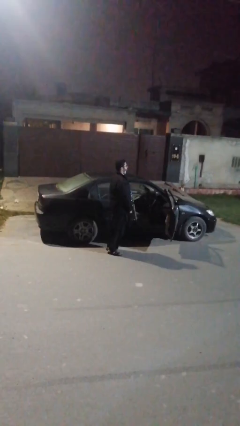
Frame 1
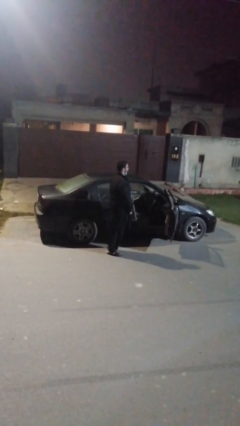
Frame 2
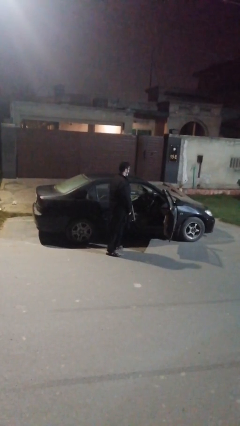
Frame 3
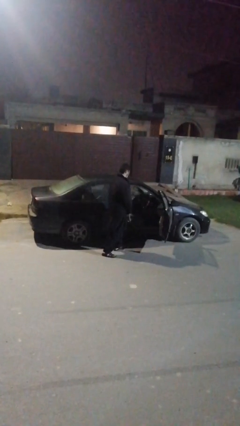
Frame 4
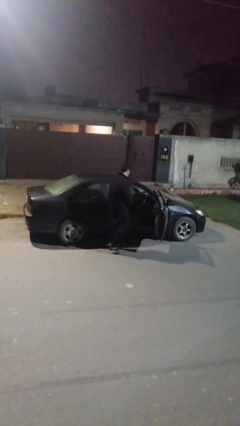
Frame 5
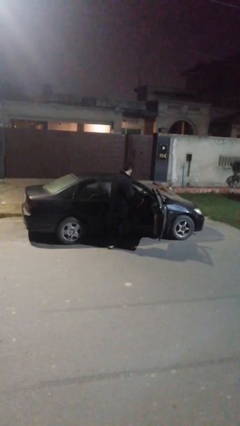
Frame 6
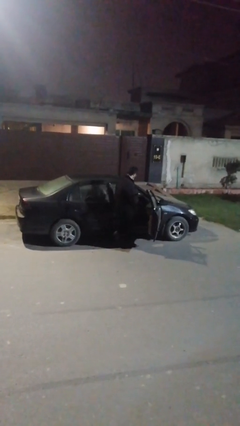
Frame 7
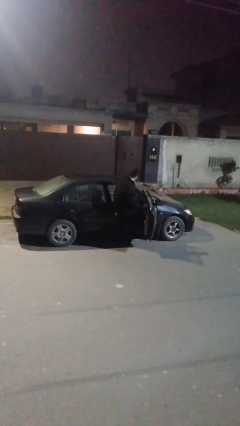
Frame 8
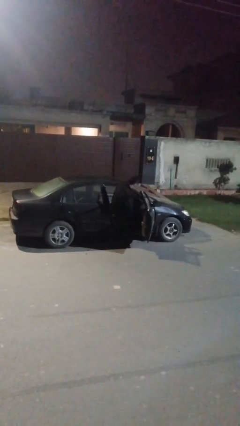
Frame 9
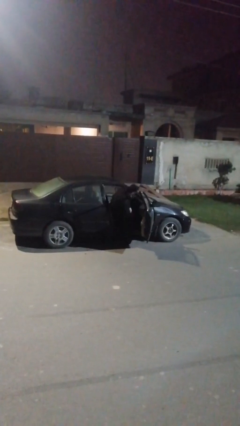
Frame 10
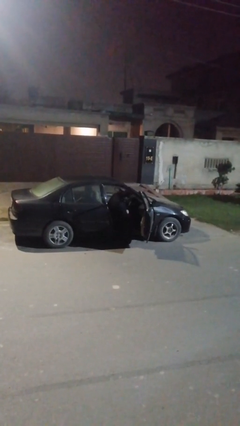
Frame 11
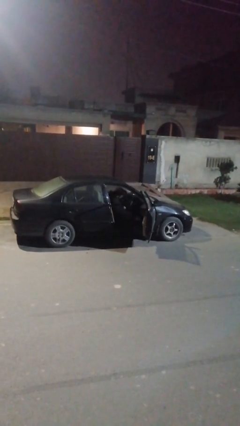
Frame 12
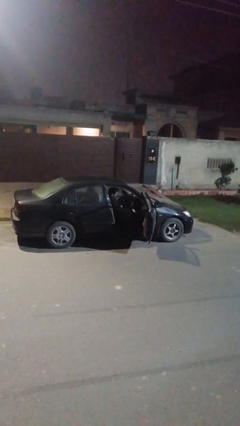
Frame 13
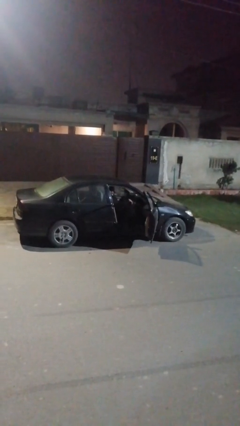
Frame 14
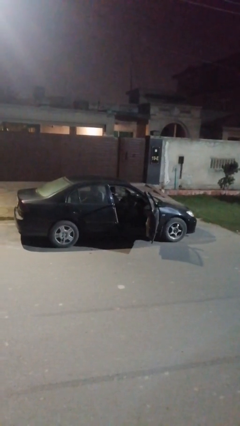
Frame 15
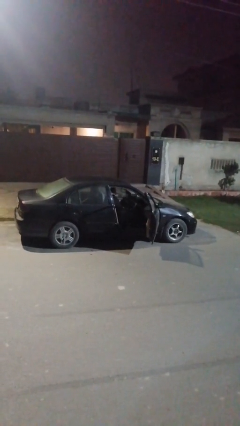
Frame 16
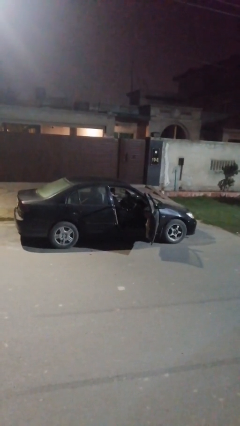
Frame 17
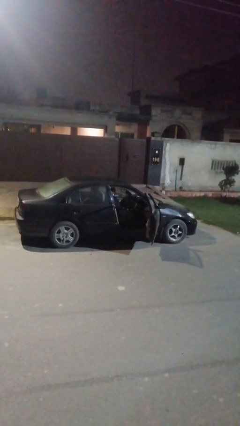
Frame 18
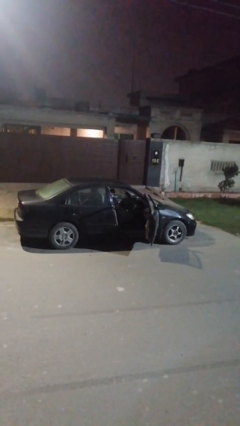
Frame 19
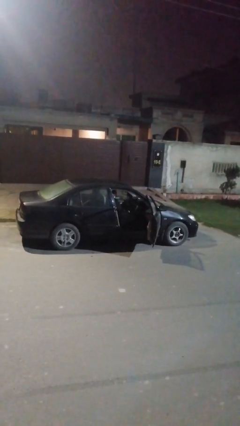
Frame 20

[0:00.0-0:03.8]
person enters car

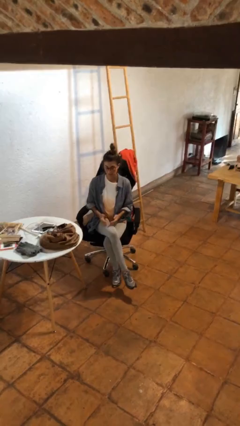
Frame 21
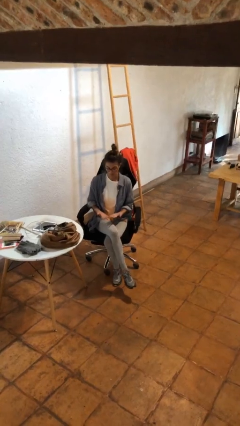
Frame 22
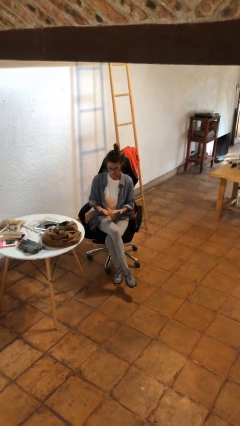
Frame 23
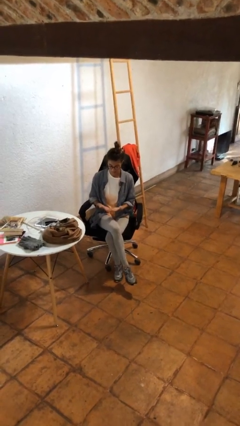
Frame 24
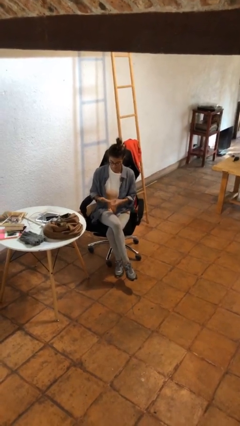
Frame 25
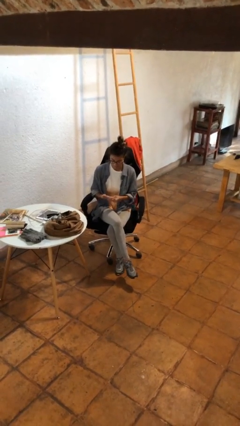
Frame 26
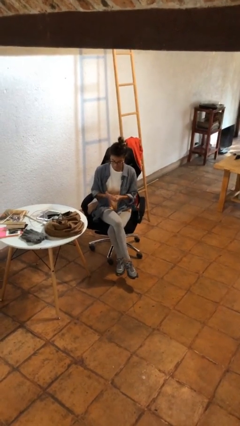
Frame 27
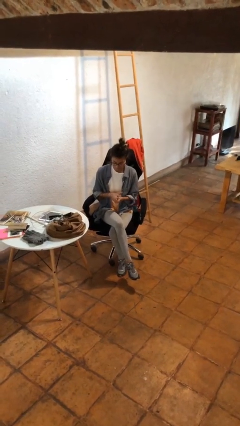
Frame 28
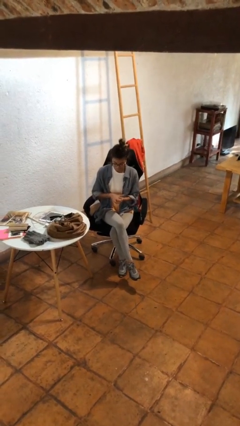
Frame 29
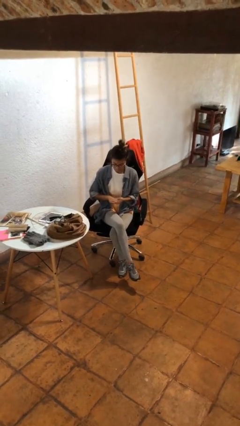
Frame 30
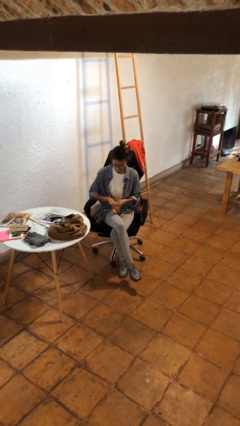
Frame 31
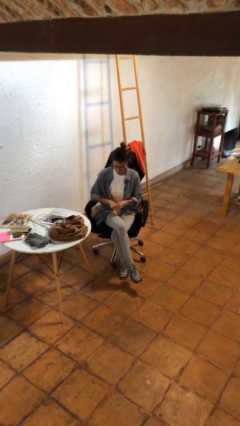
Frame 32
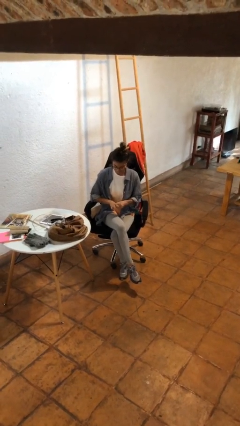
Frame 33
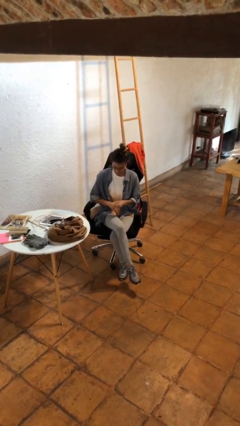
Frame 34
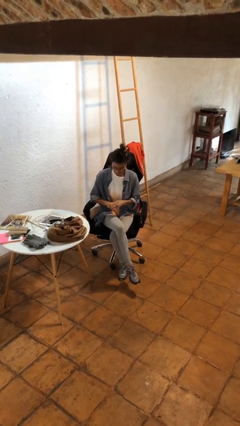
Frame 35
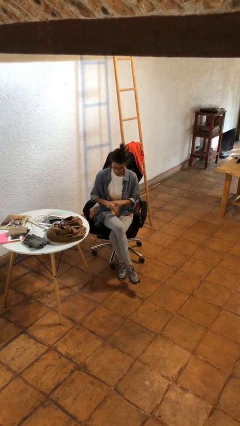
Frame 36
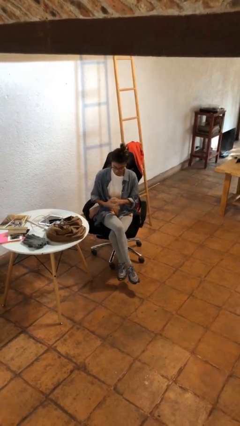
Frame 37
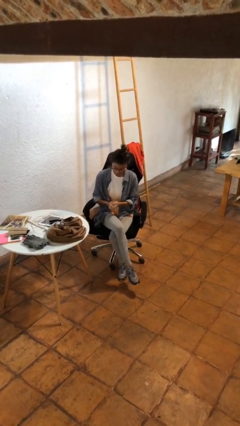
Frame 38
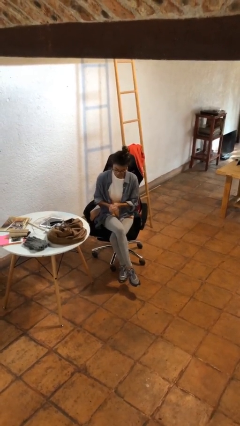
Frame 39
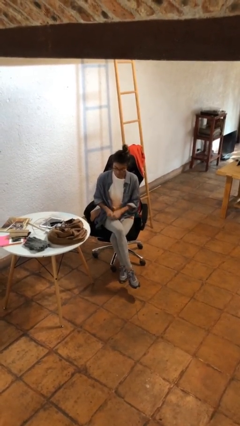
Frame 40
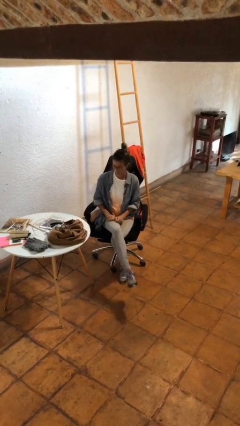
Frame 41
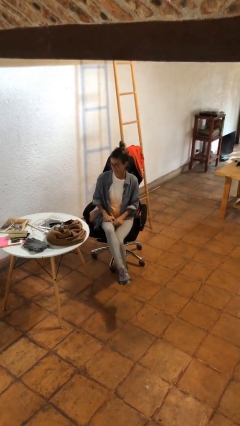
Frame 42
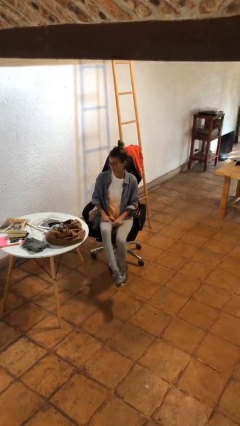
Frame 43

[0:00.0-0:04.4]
person looks at hands in lap

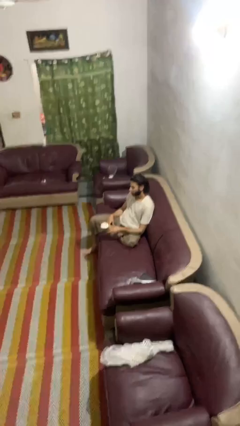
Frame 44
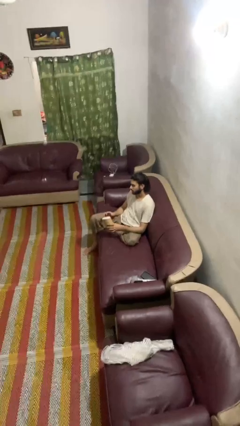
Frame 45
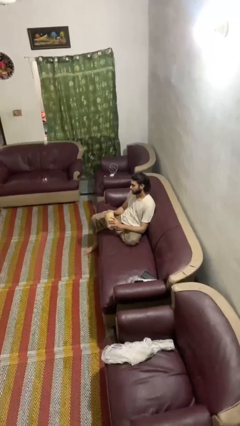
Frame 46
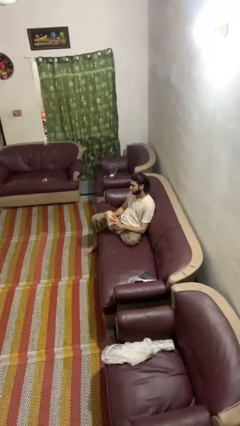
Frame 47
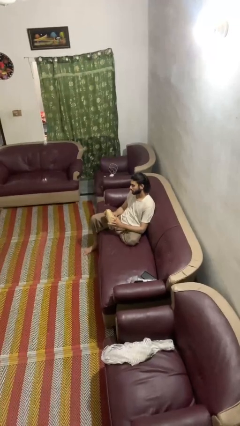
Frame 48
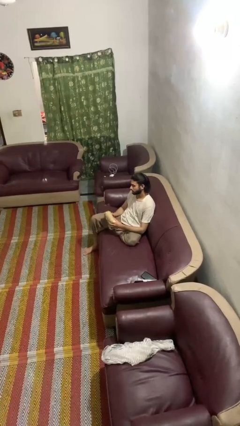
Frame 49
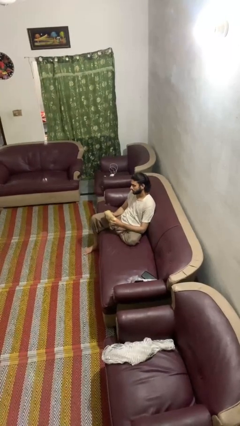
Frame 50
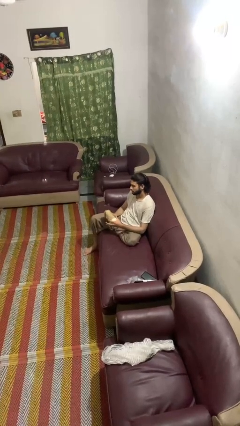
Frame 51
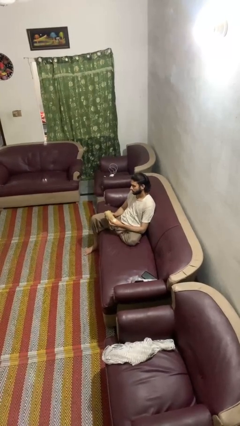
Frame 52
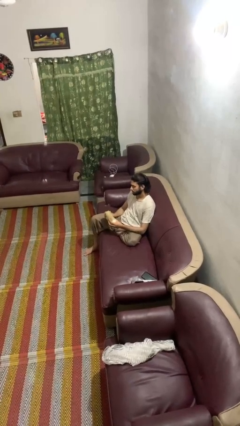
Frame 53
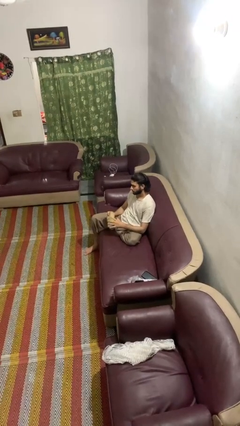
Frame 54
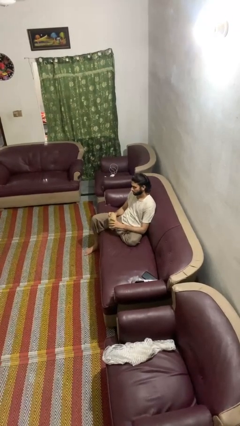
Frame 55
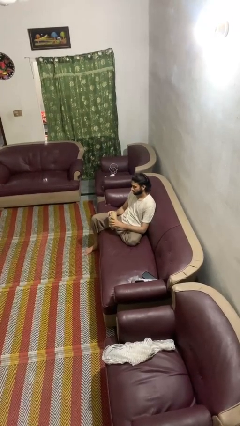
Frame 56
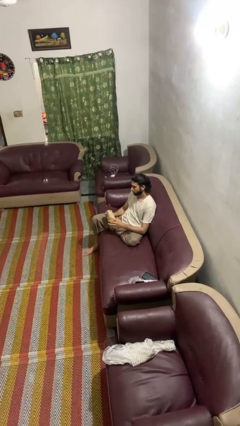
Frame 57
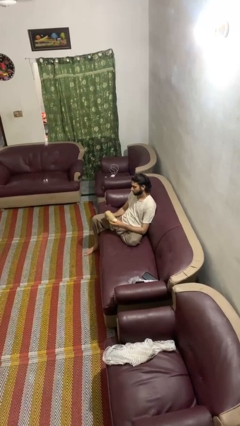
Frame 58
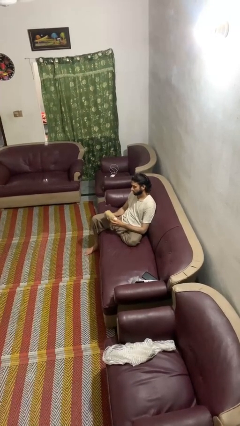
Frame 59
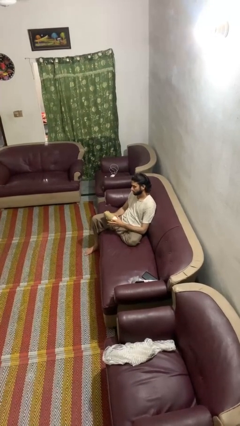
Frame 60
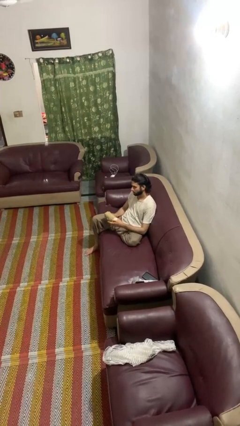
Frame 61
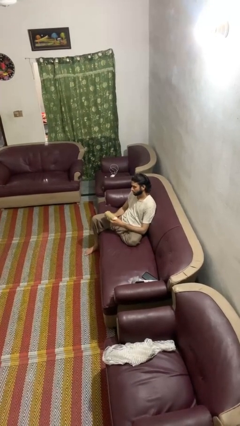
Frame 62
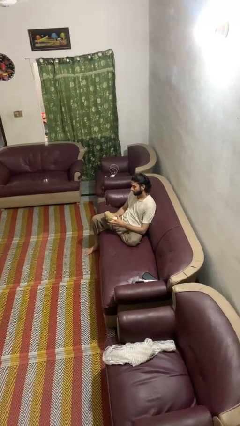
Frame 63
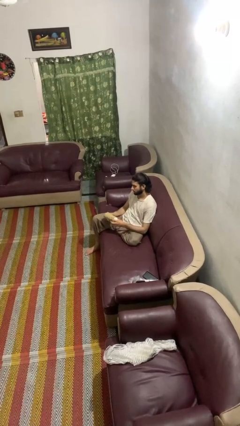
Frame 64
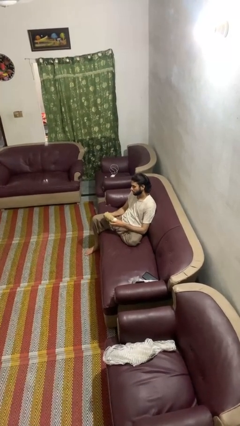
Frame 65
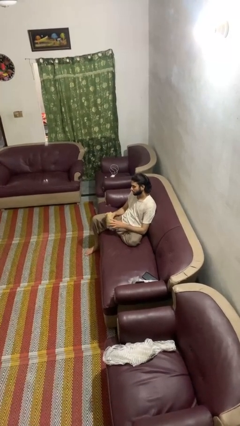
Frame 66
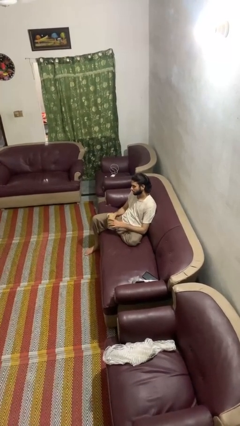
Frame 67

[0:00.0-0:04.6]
person squeezes object

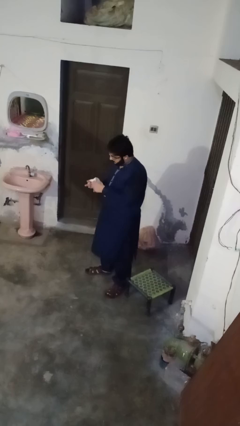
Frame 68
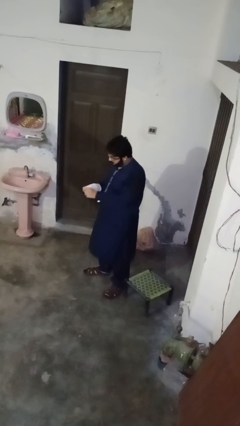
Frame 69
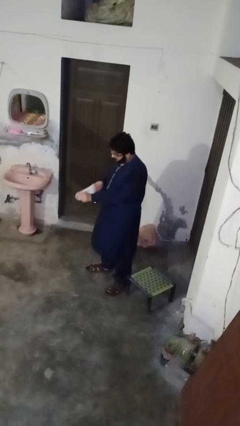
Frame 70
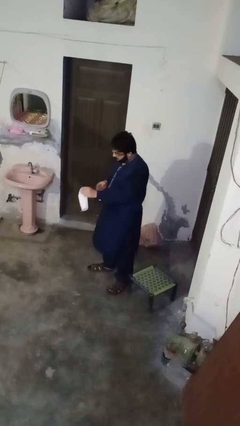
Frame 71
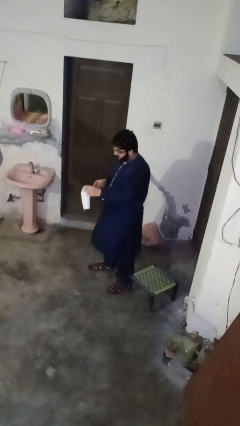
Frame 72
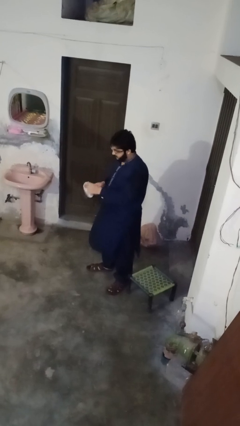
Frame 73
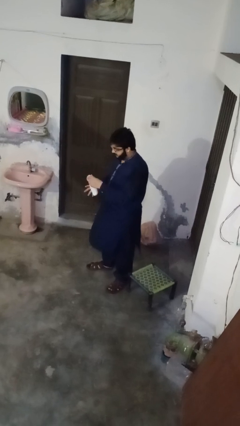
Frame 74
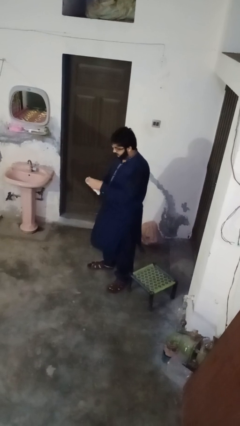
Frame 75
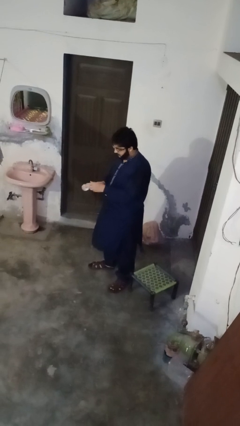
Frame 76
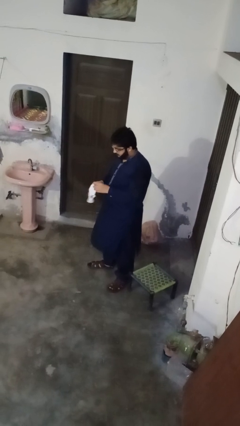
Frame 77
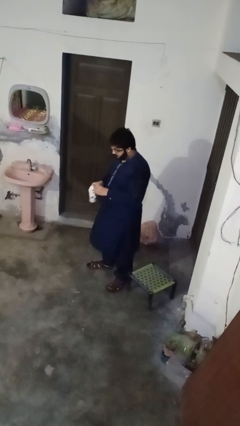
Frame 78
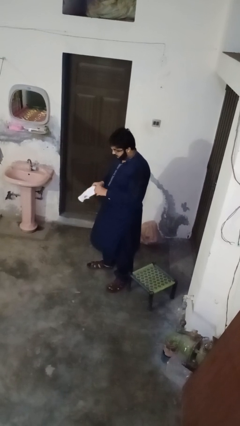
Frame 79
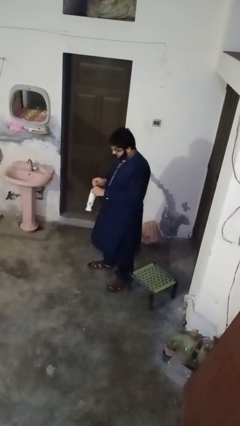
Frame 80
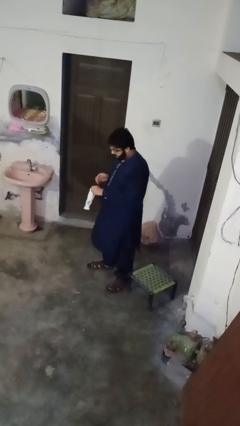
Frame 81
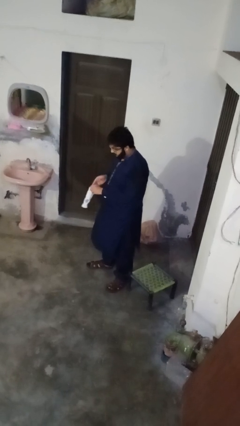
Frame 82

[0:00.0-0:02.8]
person takes off gloves

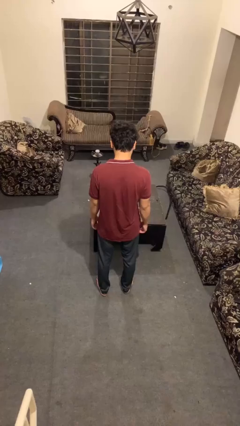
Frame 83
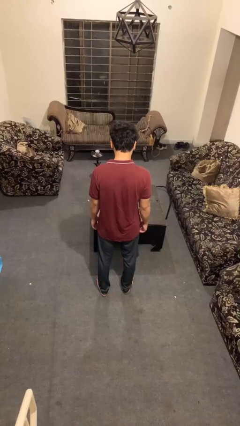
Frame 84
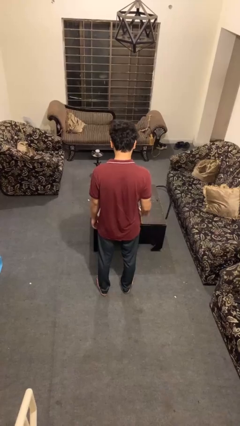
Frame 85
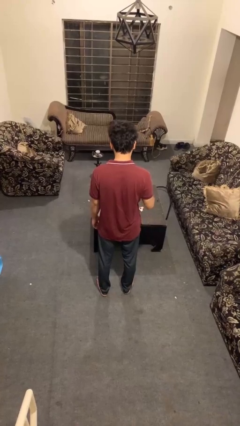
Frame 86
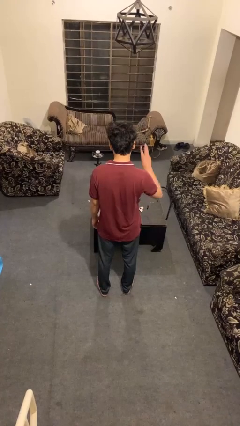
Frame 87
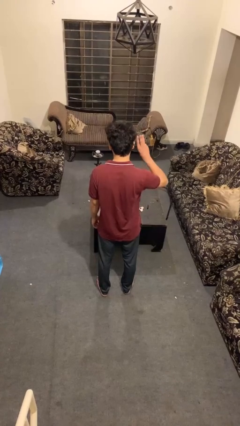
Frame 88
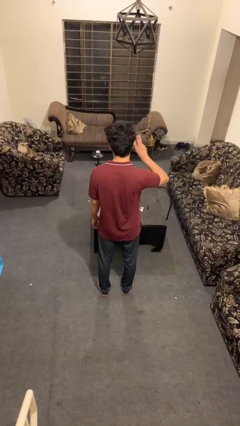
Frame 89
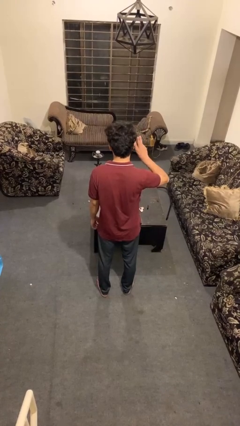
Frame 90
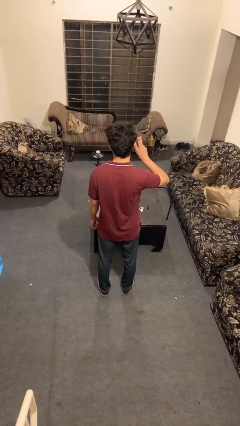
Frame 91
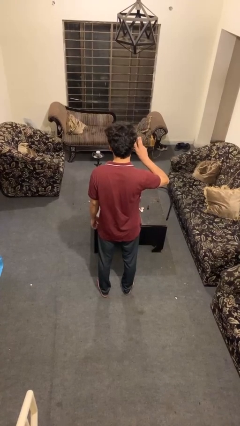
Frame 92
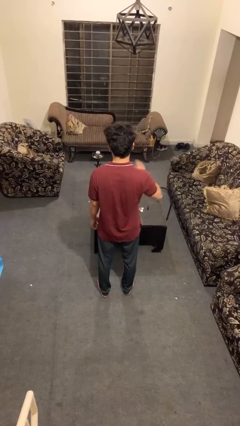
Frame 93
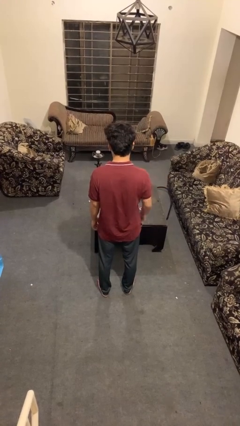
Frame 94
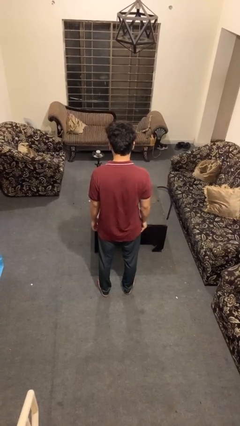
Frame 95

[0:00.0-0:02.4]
person gestures number three
